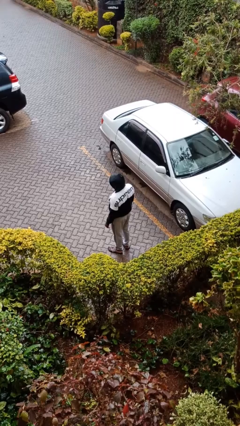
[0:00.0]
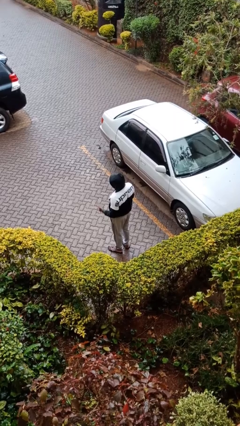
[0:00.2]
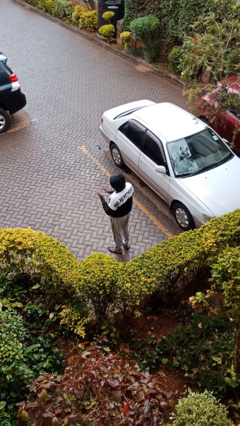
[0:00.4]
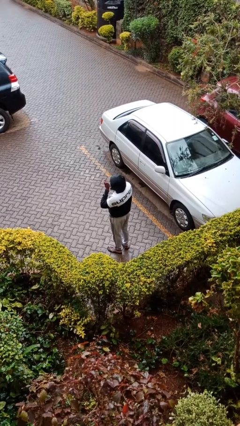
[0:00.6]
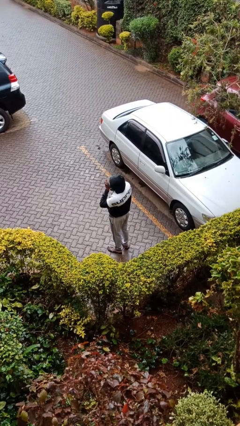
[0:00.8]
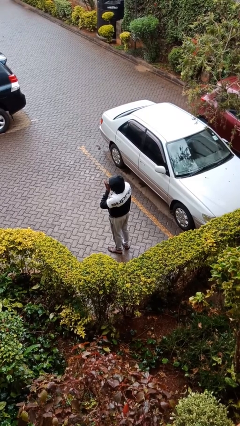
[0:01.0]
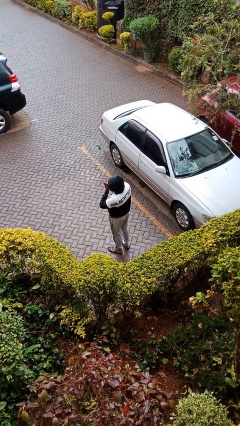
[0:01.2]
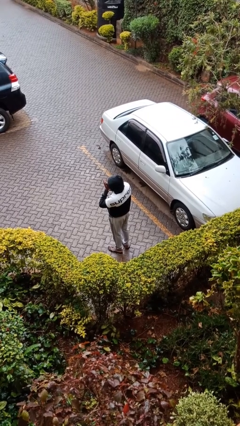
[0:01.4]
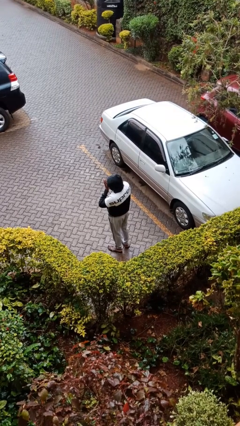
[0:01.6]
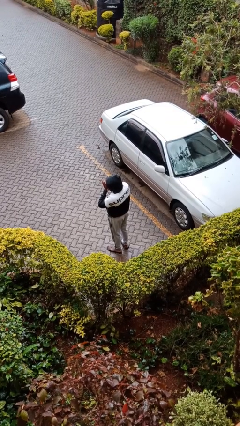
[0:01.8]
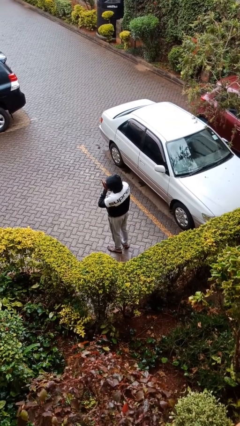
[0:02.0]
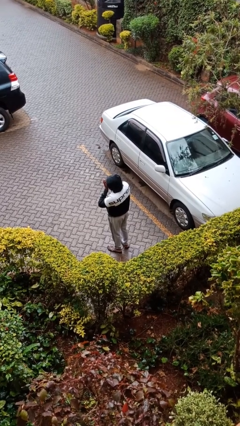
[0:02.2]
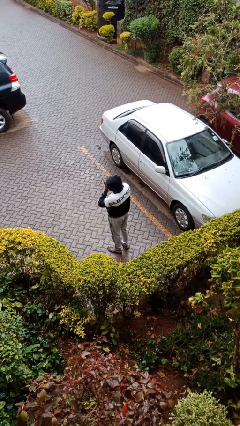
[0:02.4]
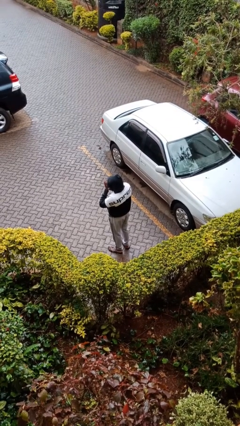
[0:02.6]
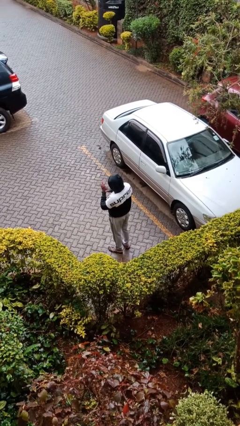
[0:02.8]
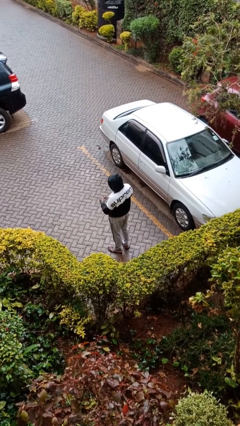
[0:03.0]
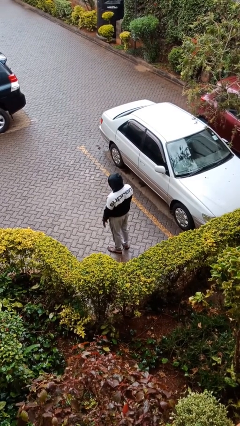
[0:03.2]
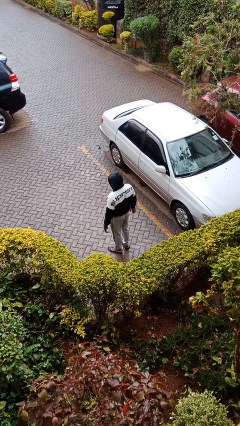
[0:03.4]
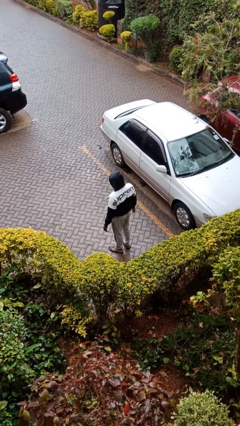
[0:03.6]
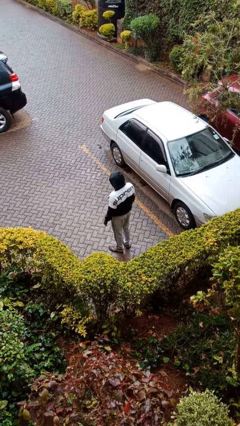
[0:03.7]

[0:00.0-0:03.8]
person blows into hands

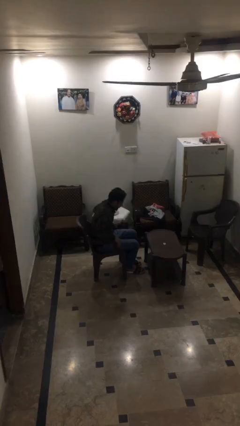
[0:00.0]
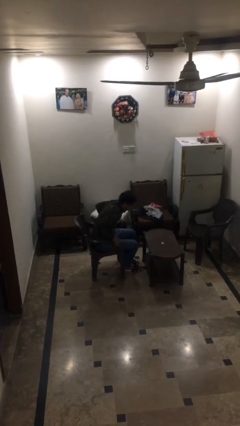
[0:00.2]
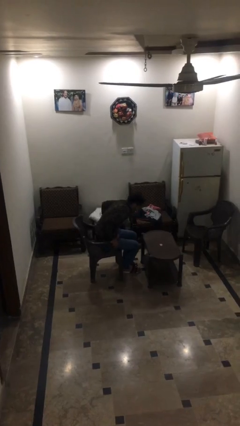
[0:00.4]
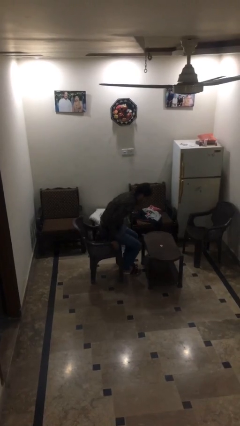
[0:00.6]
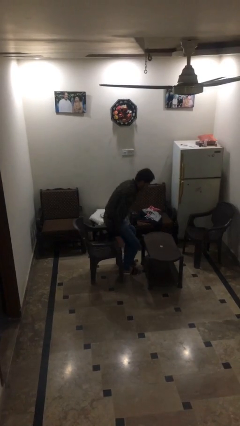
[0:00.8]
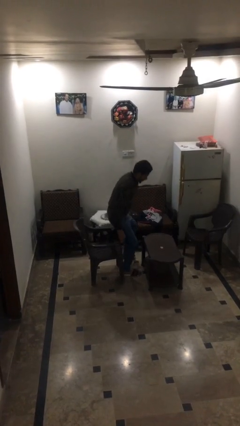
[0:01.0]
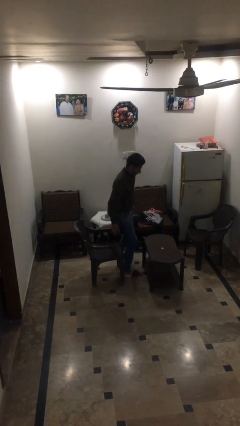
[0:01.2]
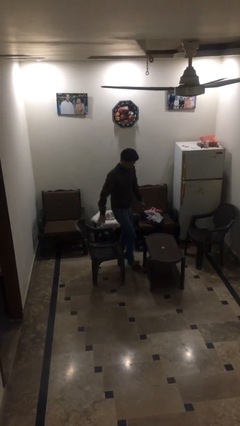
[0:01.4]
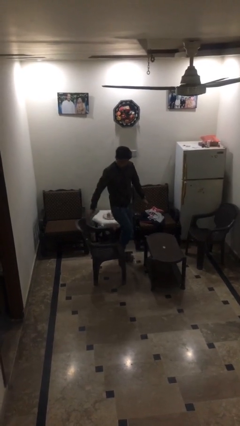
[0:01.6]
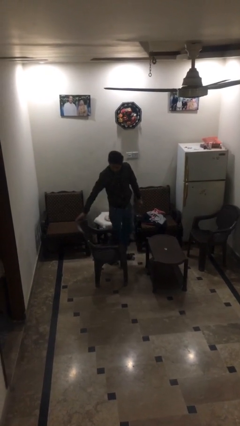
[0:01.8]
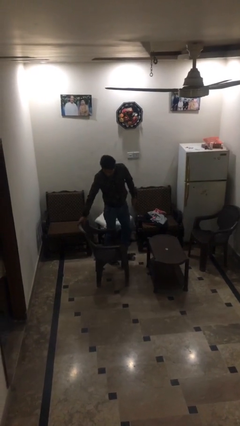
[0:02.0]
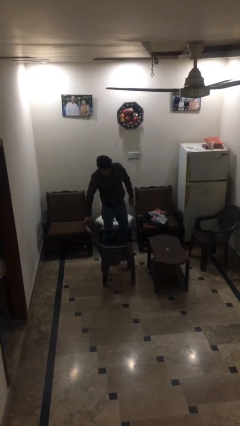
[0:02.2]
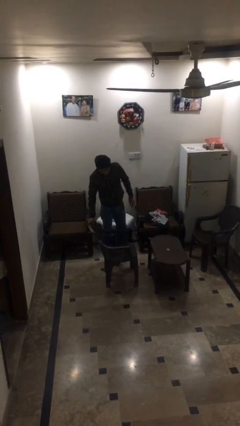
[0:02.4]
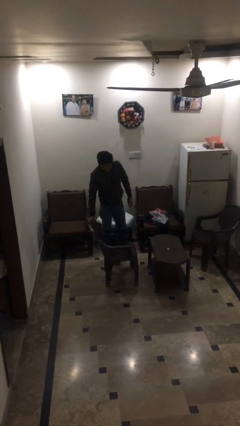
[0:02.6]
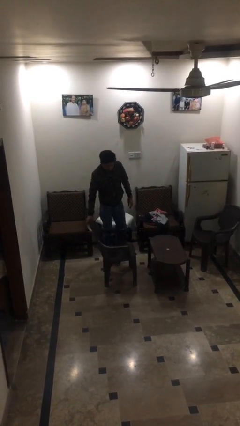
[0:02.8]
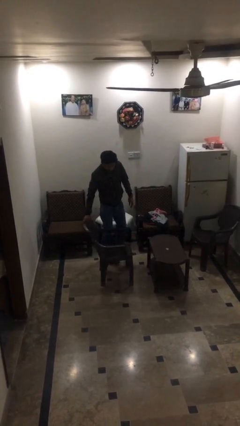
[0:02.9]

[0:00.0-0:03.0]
person stands up

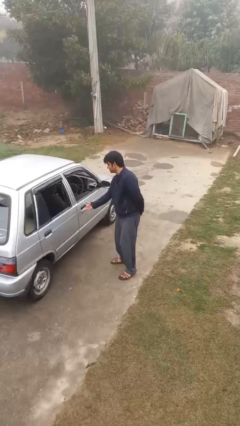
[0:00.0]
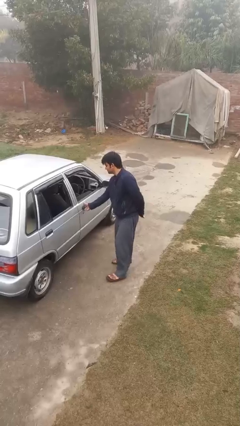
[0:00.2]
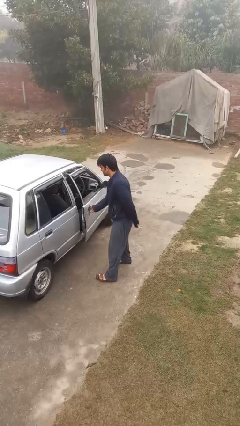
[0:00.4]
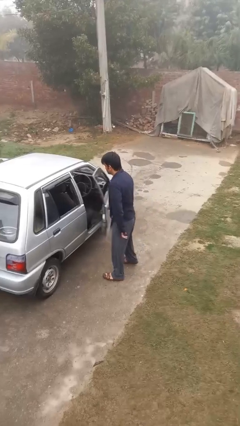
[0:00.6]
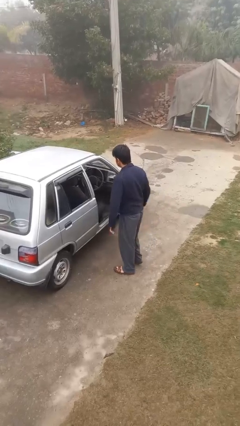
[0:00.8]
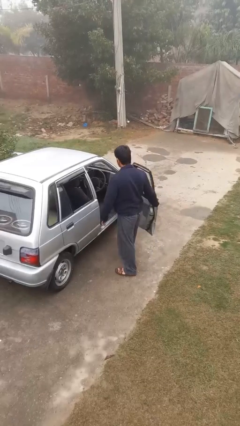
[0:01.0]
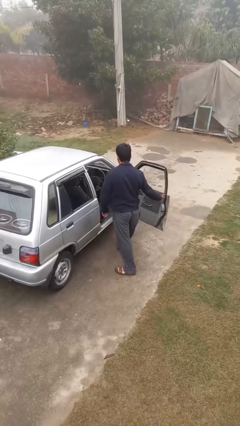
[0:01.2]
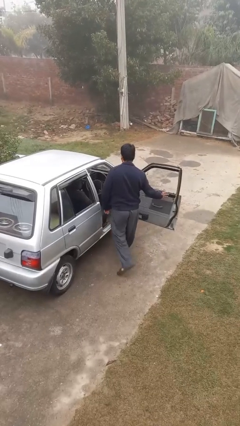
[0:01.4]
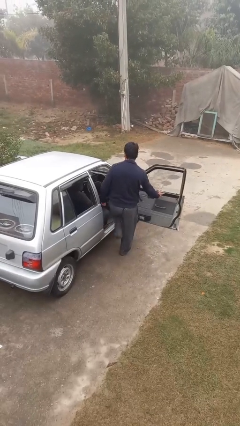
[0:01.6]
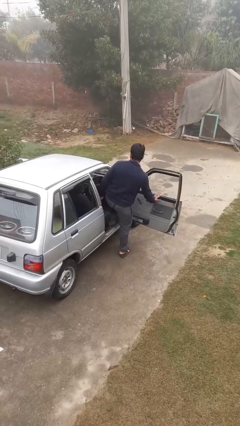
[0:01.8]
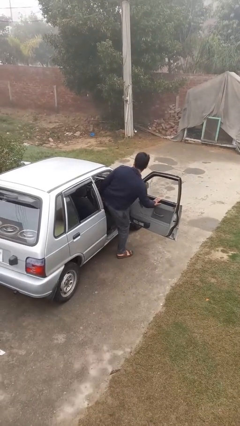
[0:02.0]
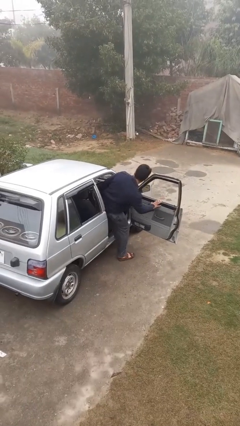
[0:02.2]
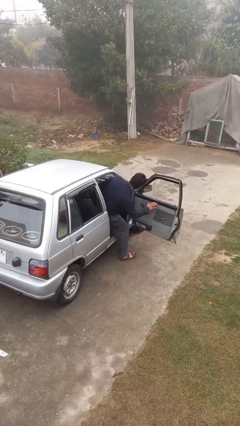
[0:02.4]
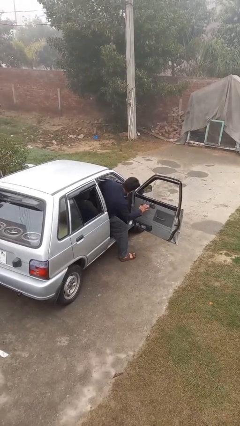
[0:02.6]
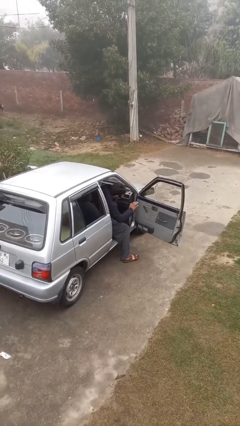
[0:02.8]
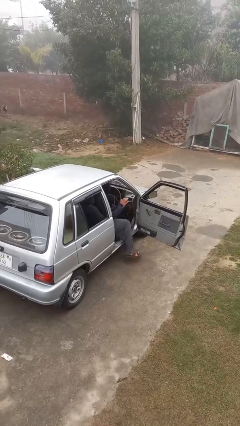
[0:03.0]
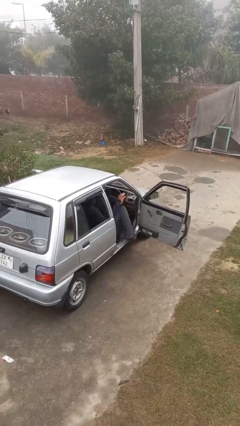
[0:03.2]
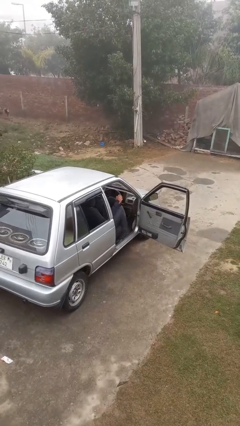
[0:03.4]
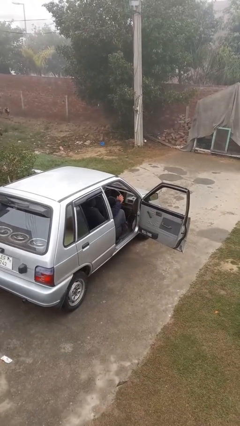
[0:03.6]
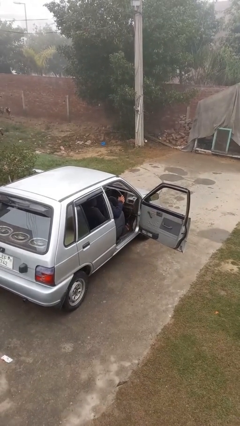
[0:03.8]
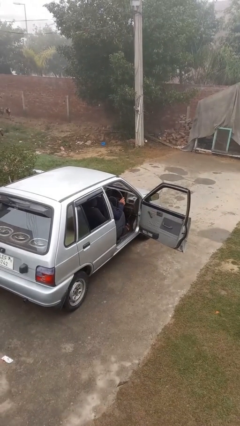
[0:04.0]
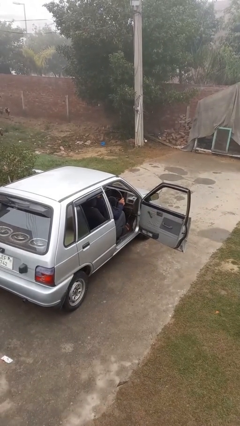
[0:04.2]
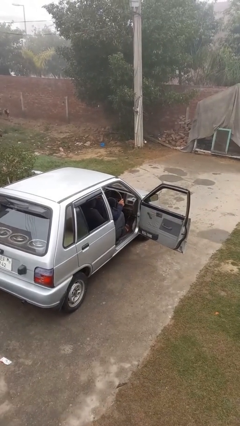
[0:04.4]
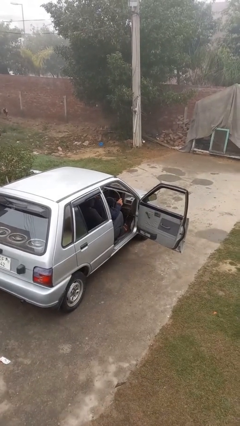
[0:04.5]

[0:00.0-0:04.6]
person enters car

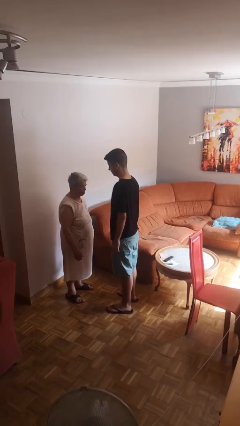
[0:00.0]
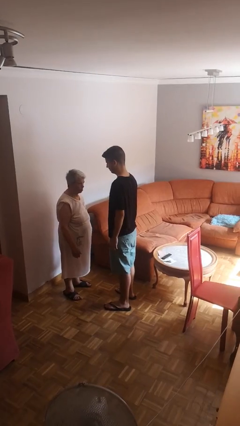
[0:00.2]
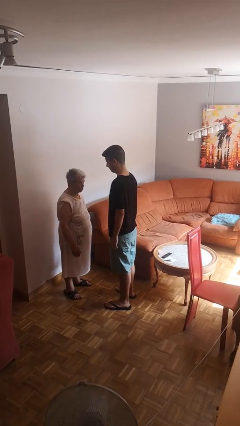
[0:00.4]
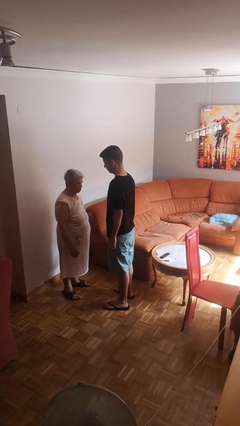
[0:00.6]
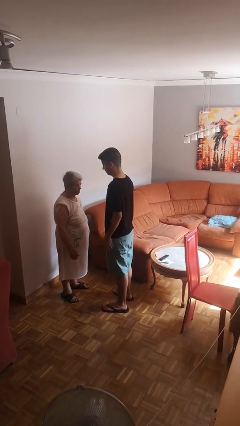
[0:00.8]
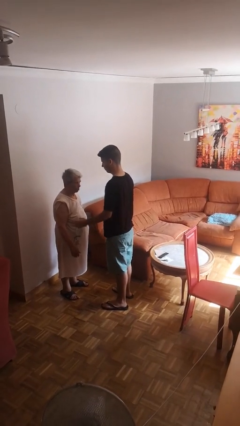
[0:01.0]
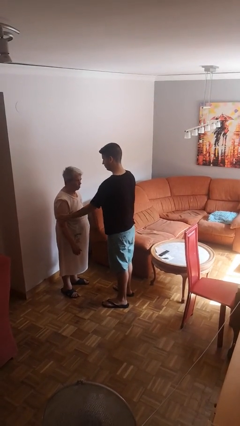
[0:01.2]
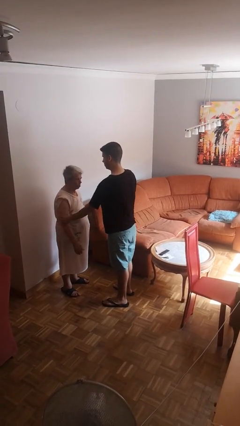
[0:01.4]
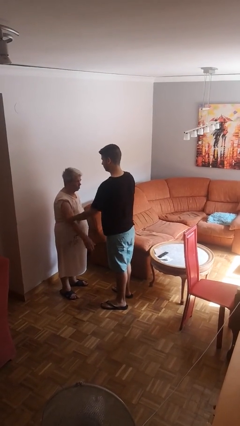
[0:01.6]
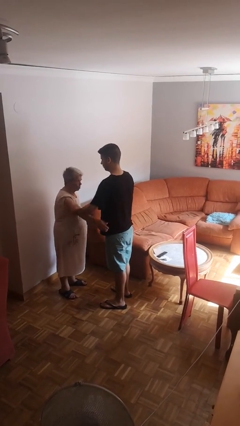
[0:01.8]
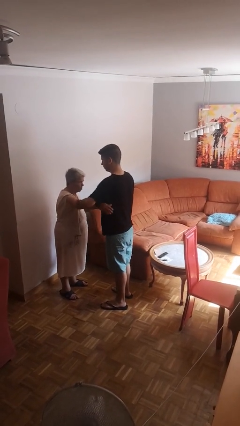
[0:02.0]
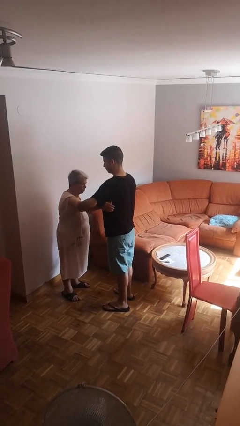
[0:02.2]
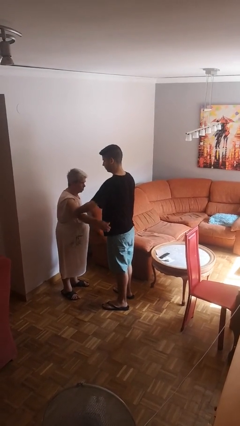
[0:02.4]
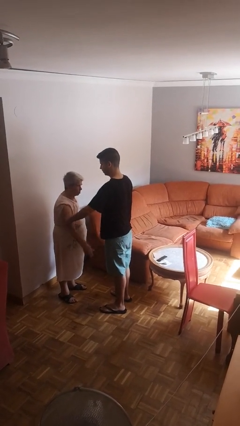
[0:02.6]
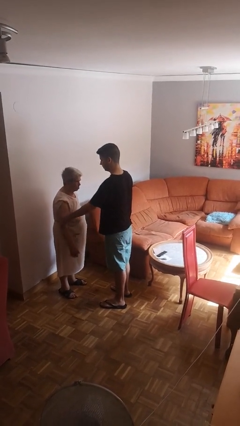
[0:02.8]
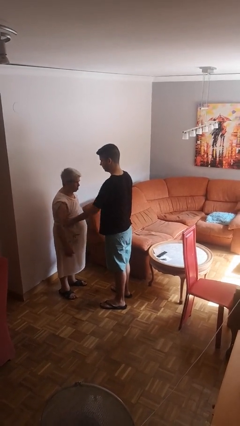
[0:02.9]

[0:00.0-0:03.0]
person grabs person by bicep

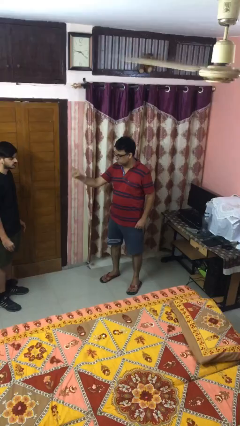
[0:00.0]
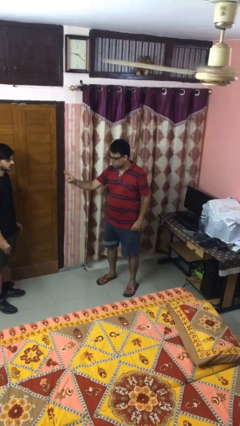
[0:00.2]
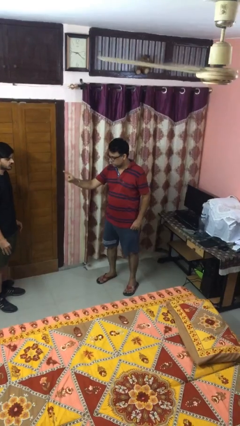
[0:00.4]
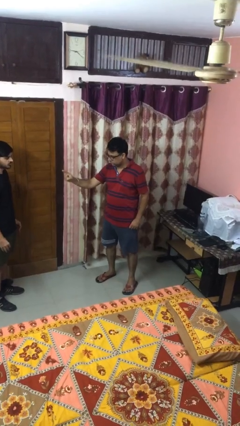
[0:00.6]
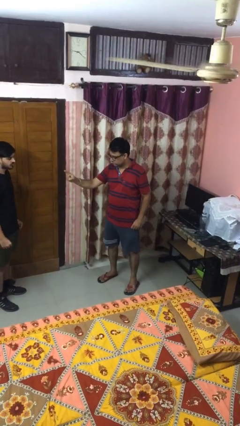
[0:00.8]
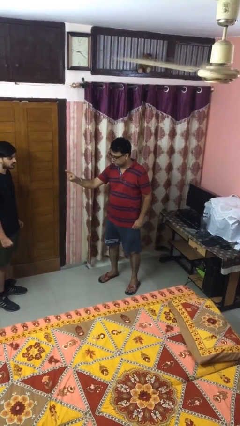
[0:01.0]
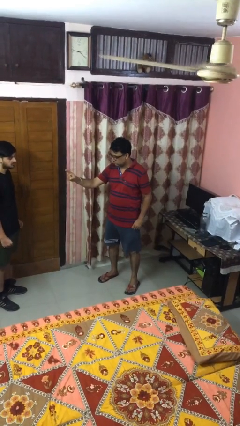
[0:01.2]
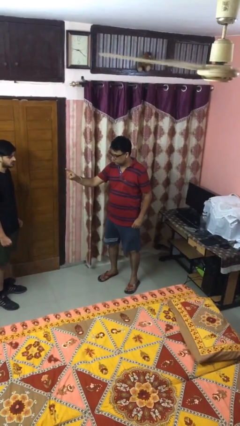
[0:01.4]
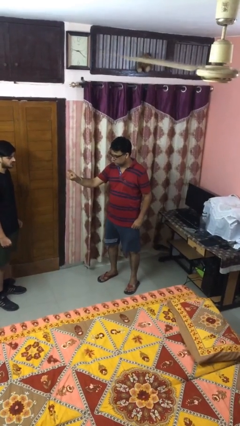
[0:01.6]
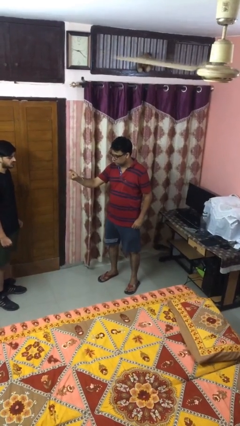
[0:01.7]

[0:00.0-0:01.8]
person points at person

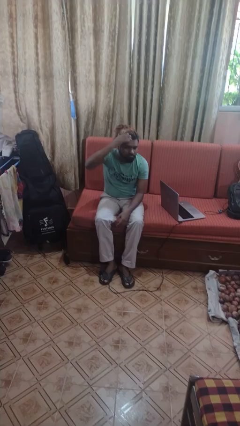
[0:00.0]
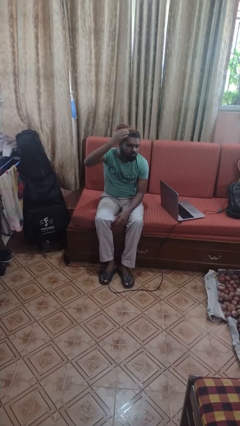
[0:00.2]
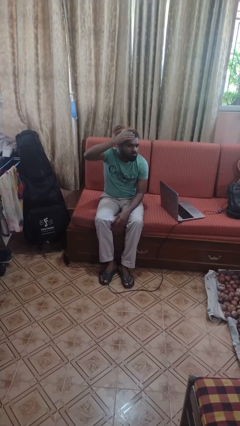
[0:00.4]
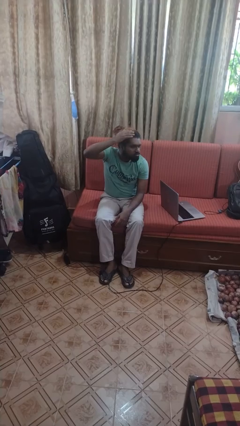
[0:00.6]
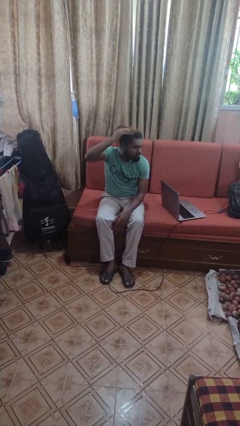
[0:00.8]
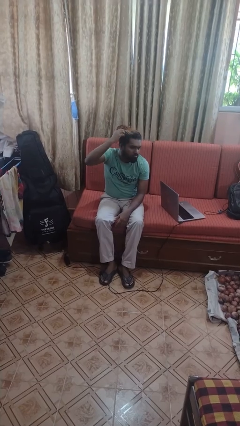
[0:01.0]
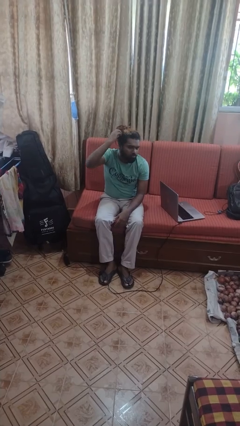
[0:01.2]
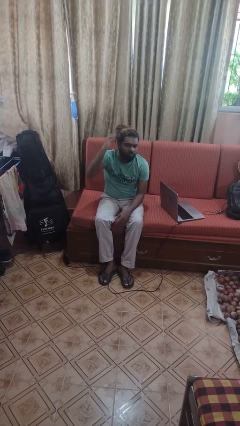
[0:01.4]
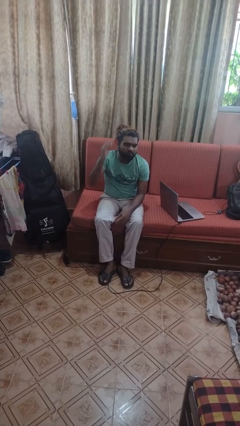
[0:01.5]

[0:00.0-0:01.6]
person strokes hair
